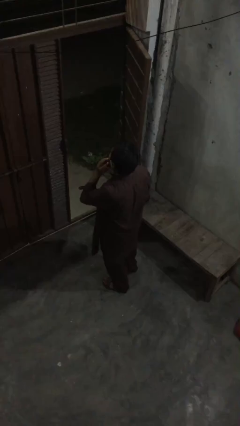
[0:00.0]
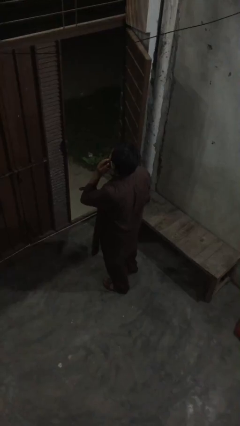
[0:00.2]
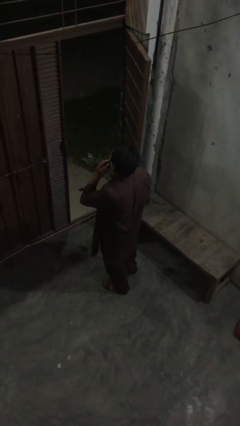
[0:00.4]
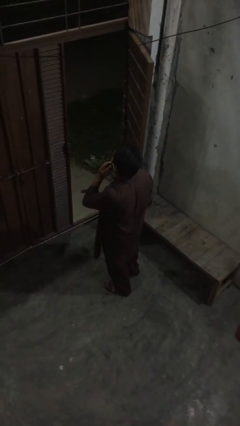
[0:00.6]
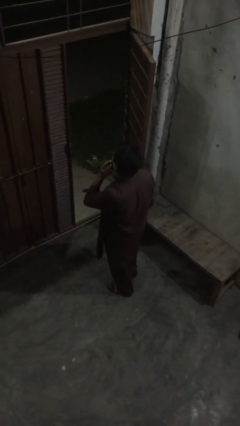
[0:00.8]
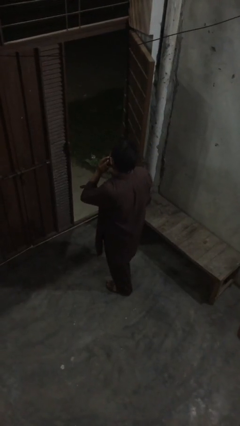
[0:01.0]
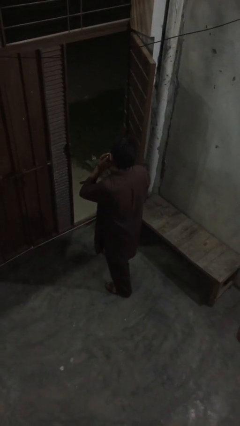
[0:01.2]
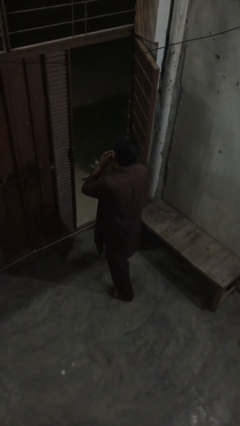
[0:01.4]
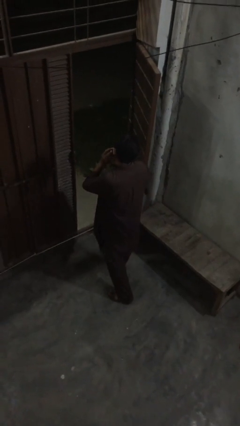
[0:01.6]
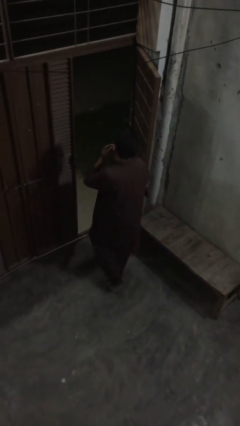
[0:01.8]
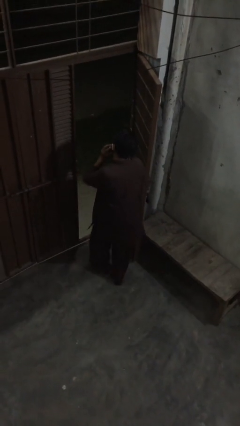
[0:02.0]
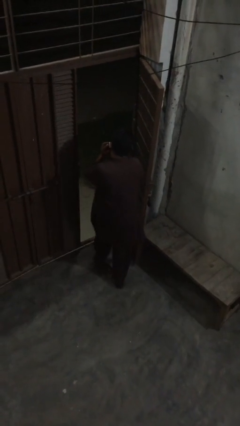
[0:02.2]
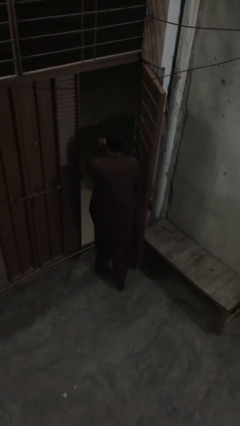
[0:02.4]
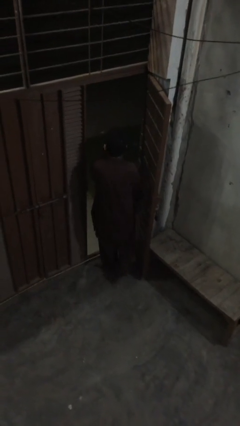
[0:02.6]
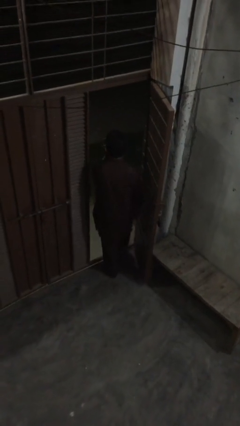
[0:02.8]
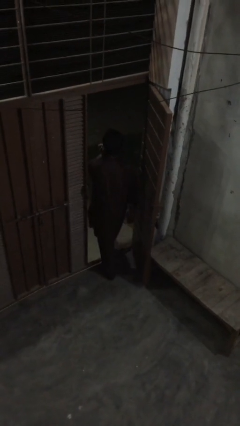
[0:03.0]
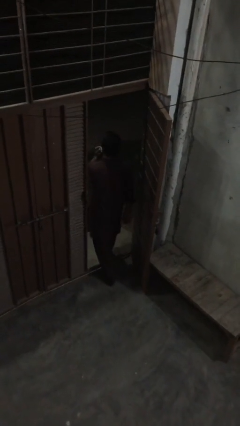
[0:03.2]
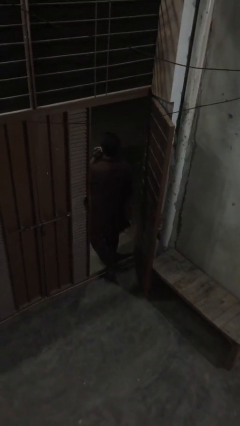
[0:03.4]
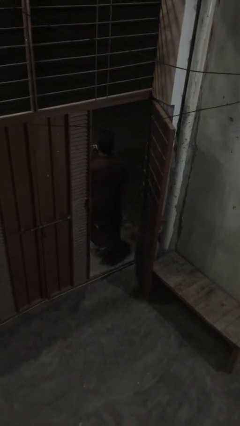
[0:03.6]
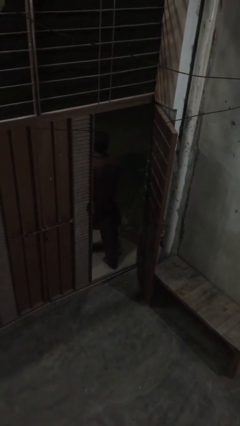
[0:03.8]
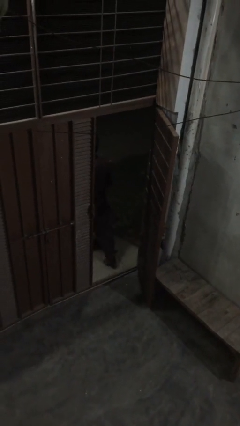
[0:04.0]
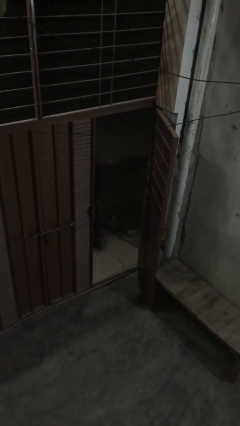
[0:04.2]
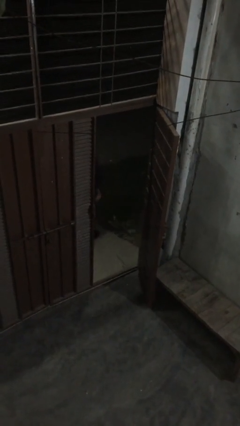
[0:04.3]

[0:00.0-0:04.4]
person exits scene through structure

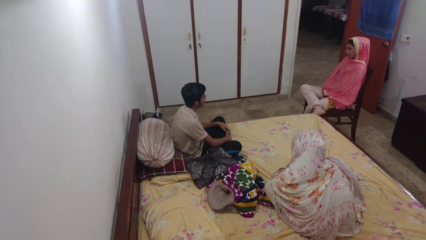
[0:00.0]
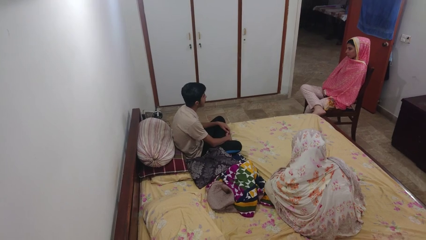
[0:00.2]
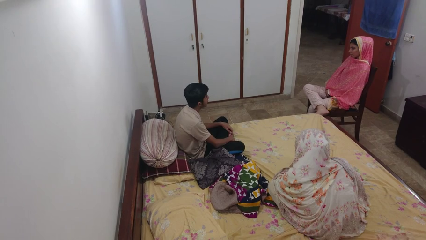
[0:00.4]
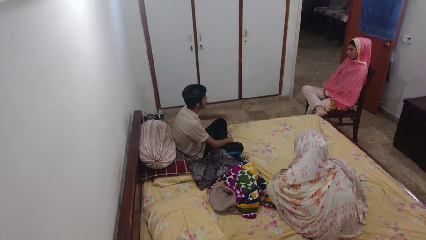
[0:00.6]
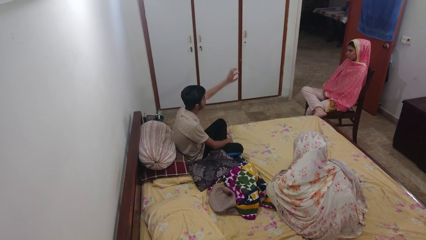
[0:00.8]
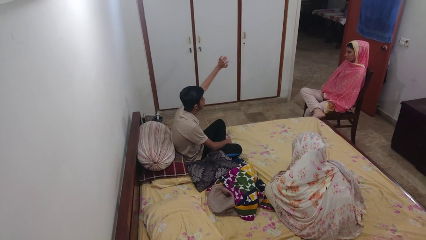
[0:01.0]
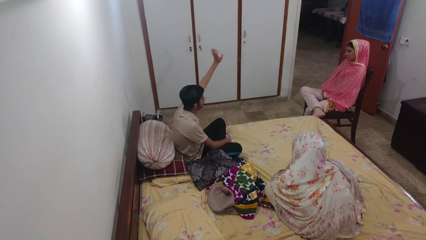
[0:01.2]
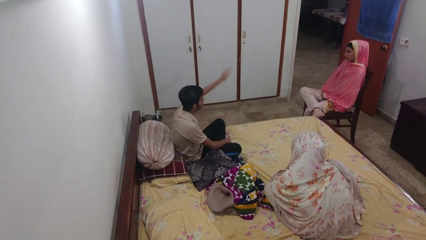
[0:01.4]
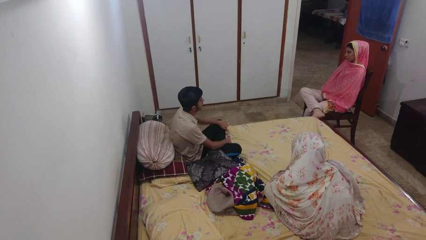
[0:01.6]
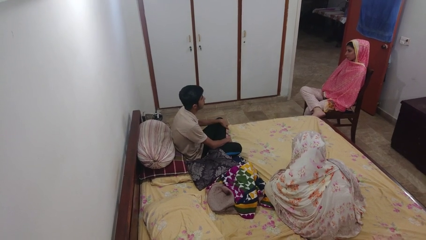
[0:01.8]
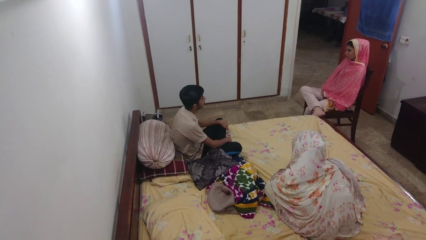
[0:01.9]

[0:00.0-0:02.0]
person waves at person

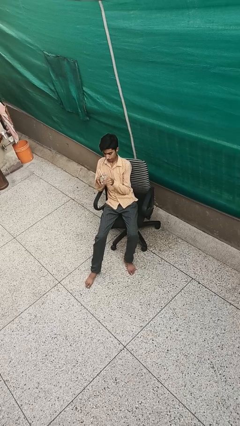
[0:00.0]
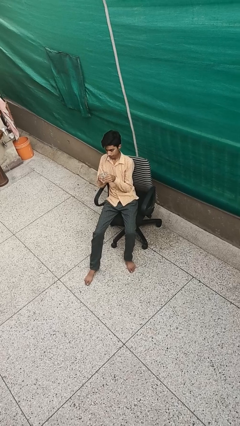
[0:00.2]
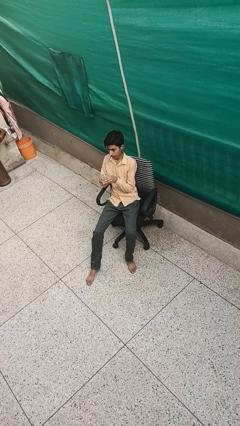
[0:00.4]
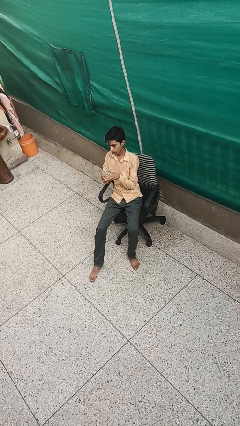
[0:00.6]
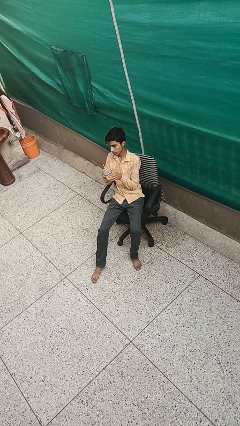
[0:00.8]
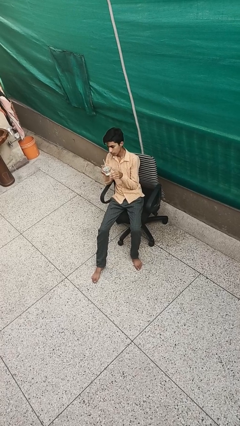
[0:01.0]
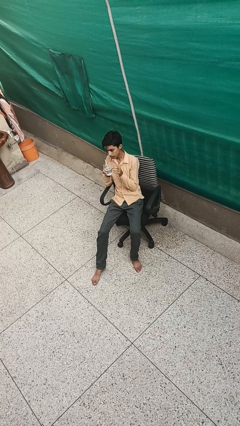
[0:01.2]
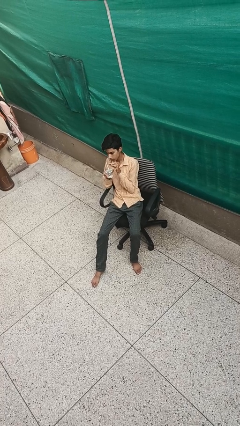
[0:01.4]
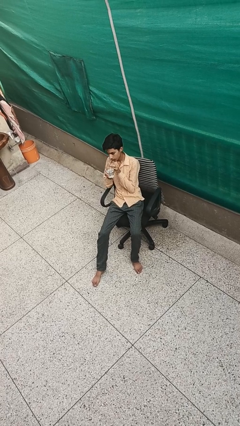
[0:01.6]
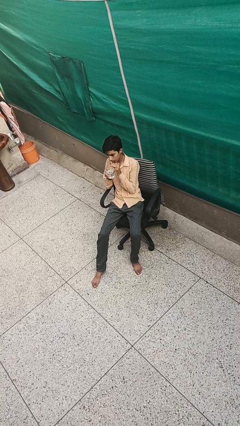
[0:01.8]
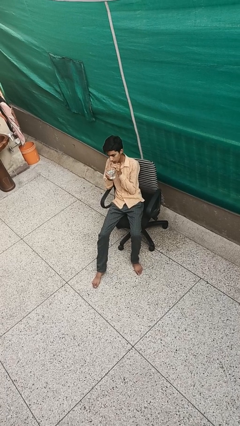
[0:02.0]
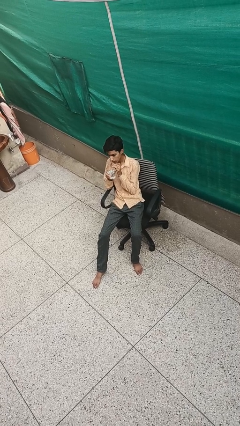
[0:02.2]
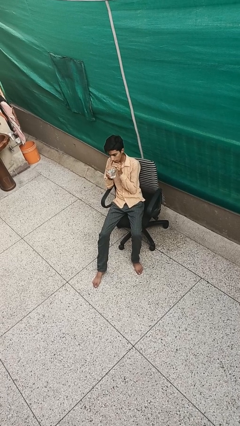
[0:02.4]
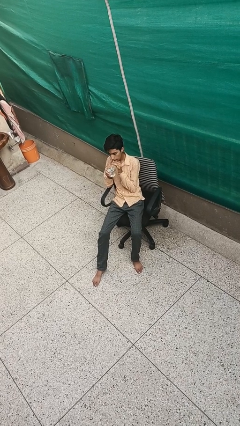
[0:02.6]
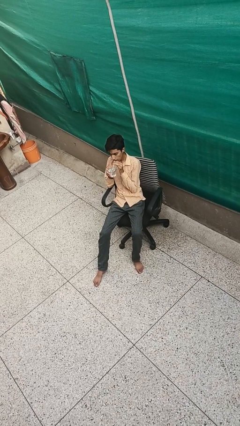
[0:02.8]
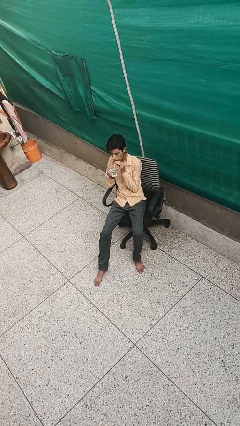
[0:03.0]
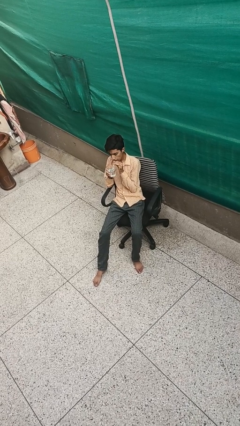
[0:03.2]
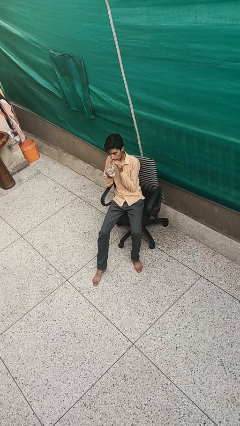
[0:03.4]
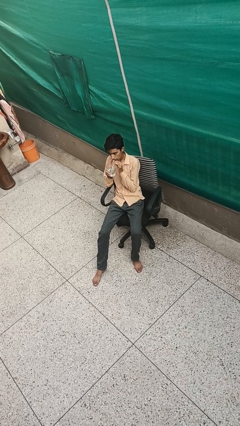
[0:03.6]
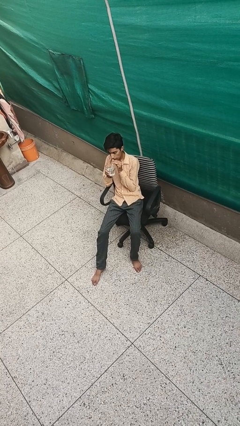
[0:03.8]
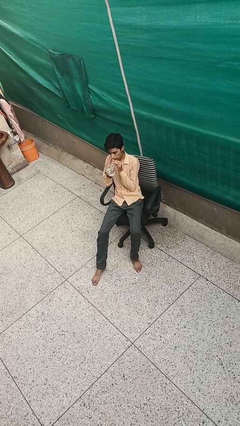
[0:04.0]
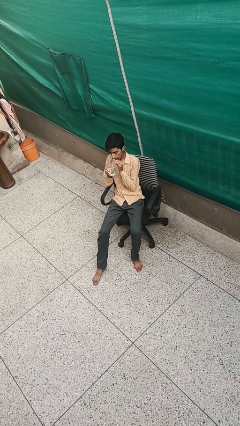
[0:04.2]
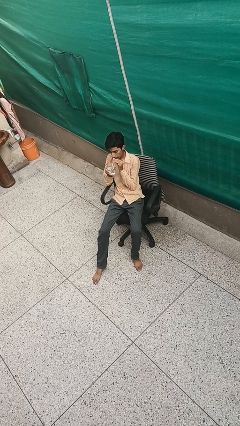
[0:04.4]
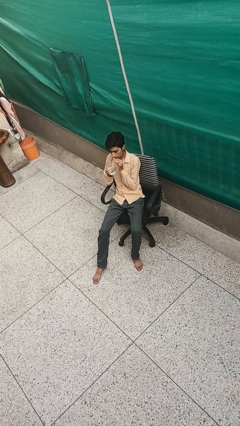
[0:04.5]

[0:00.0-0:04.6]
person drinks from straw

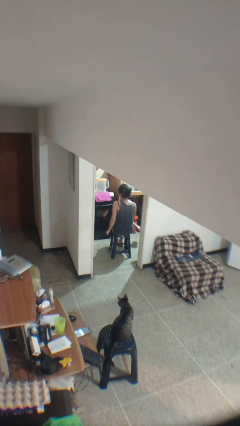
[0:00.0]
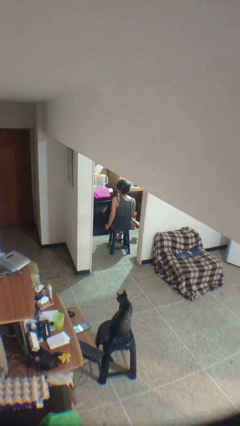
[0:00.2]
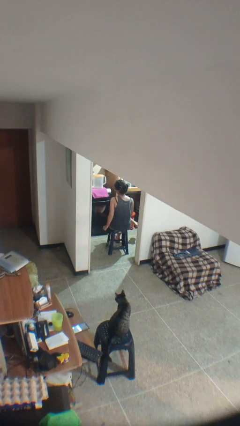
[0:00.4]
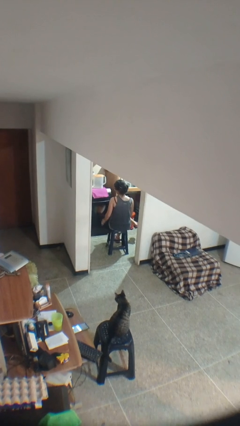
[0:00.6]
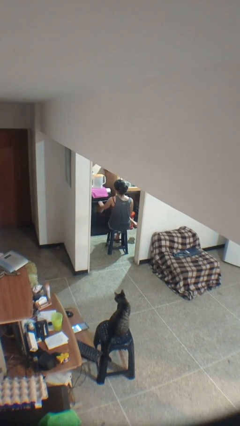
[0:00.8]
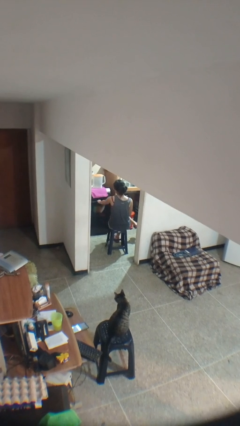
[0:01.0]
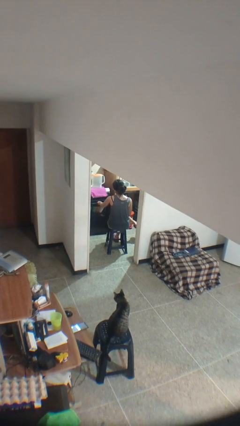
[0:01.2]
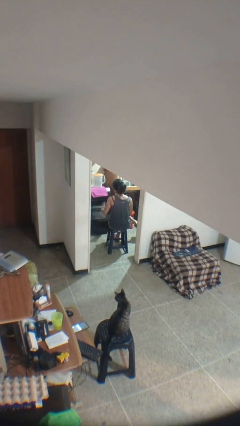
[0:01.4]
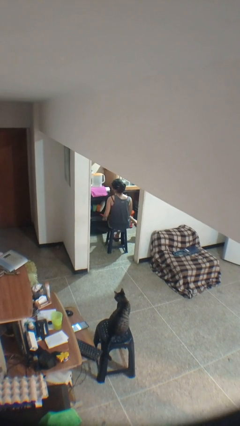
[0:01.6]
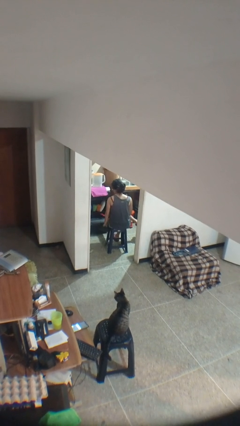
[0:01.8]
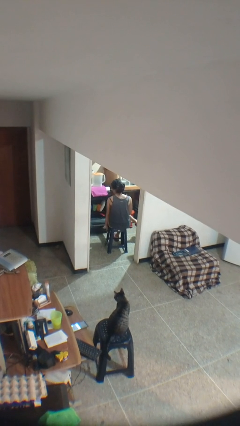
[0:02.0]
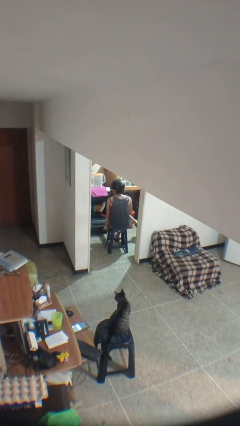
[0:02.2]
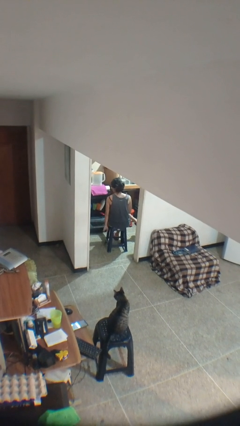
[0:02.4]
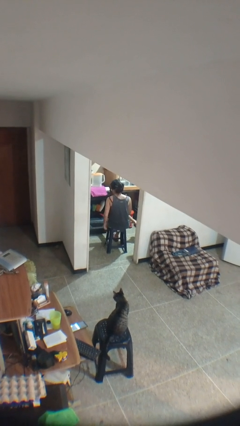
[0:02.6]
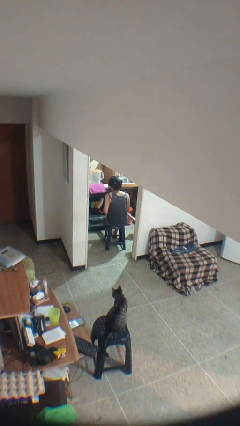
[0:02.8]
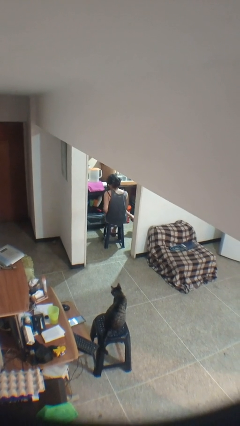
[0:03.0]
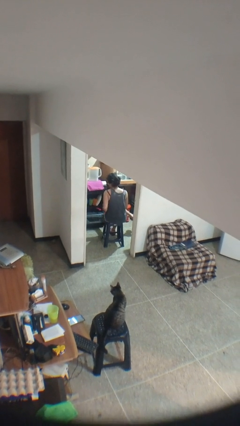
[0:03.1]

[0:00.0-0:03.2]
person opens dishwasher

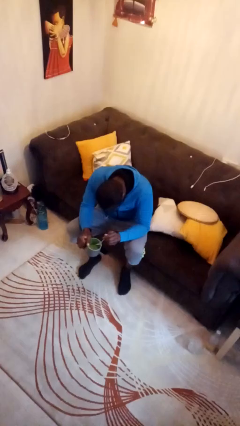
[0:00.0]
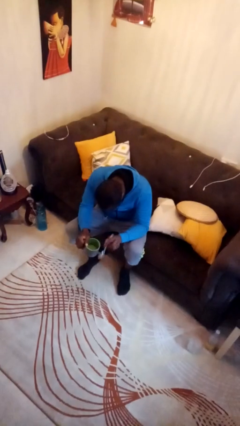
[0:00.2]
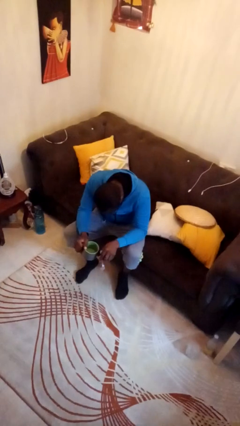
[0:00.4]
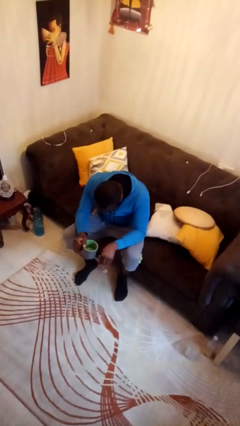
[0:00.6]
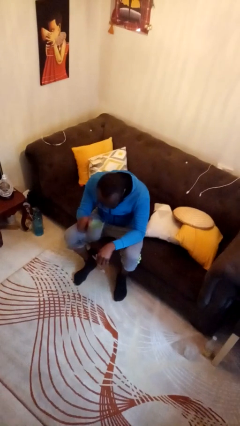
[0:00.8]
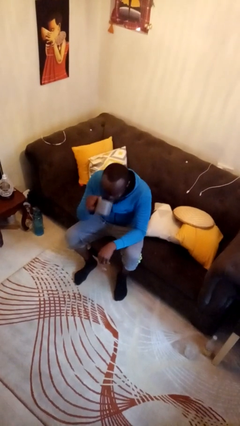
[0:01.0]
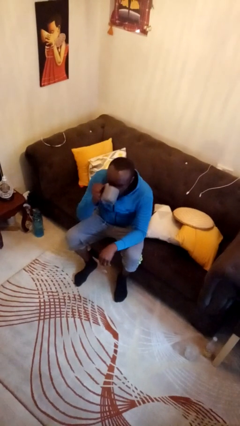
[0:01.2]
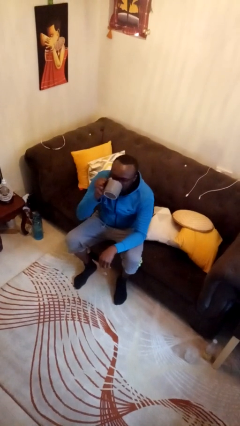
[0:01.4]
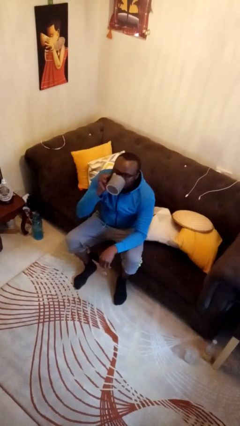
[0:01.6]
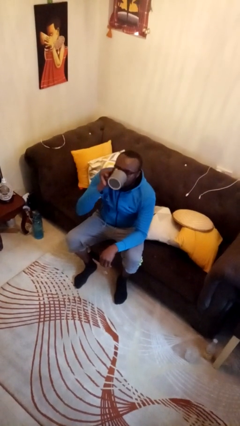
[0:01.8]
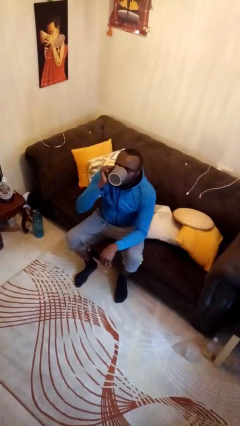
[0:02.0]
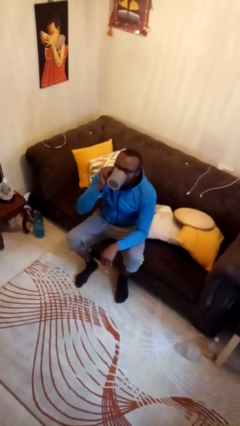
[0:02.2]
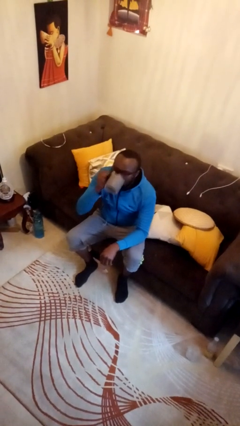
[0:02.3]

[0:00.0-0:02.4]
person drinks from mug

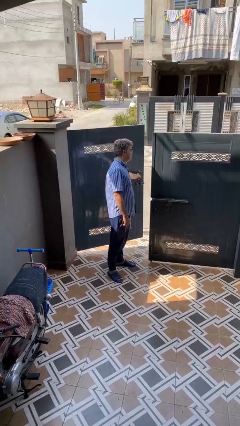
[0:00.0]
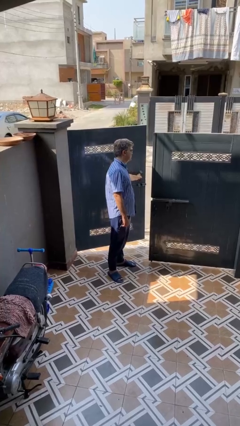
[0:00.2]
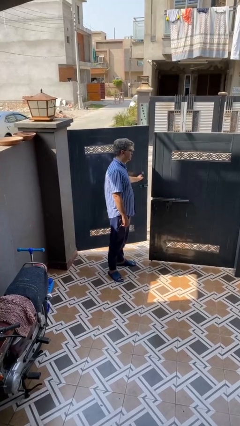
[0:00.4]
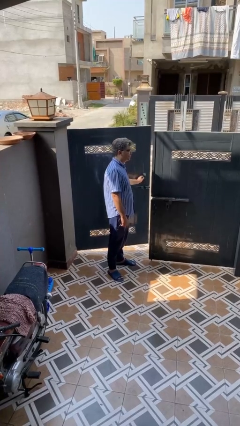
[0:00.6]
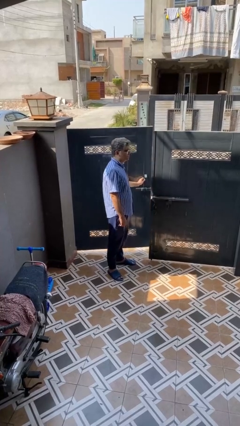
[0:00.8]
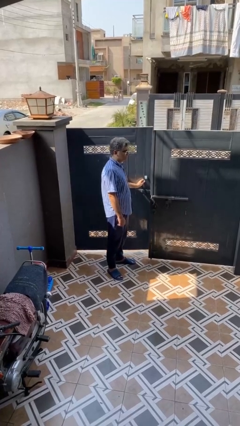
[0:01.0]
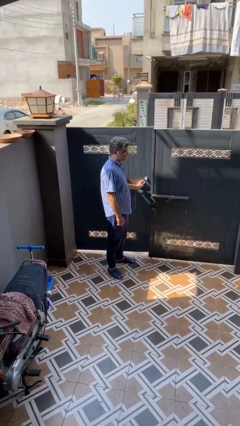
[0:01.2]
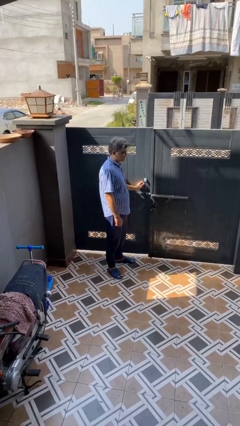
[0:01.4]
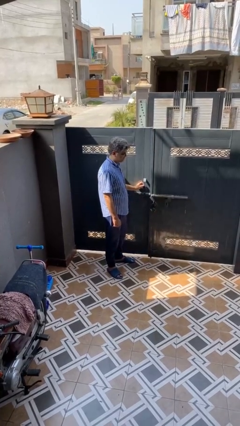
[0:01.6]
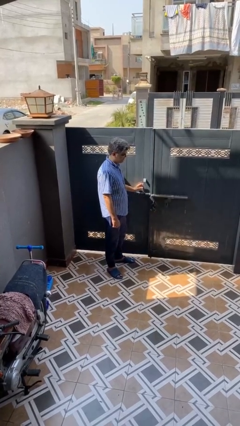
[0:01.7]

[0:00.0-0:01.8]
person closes gate
